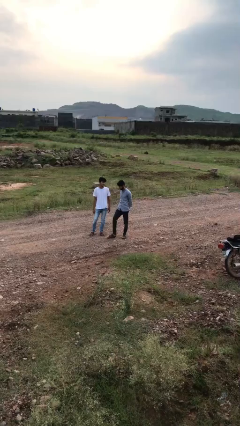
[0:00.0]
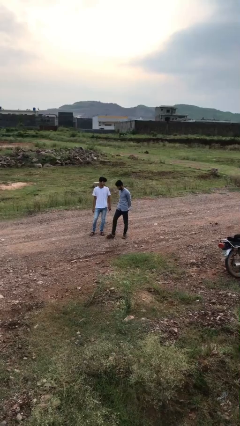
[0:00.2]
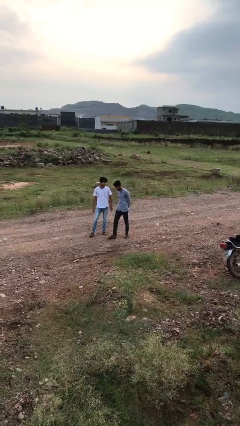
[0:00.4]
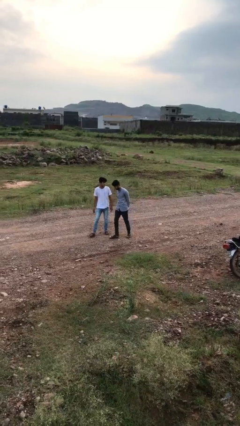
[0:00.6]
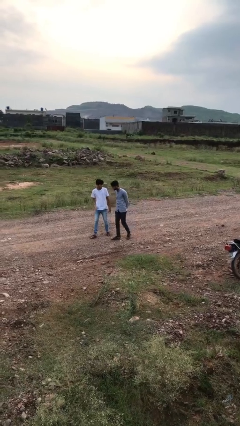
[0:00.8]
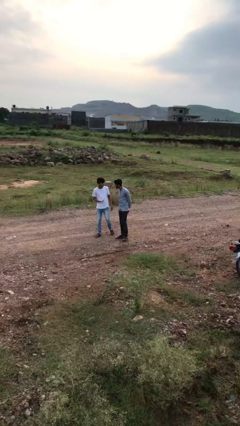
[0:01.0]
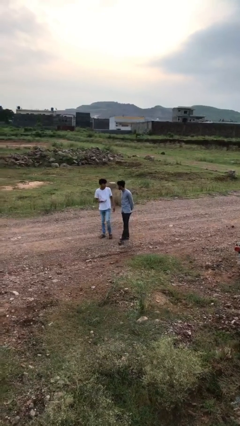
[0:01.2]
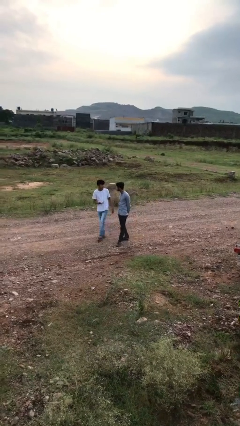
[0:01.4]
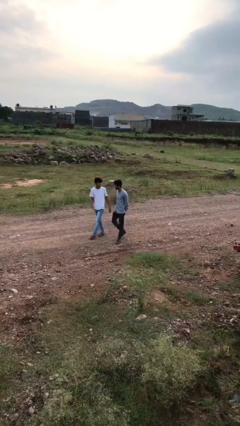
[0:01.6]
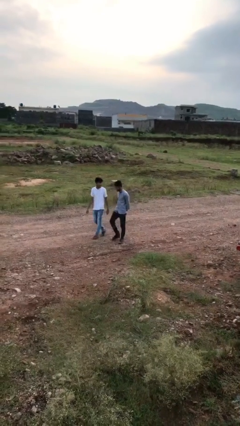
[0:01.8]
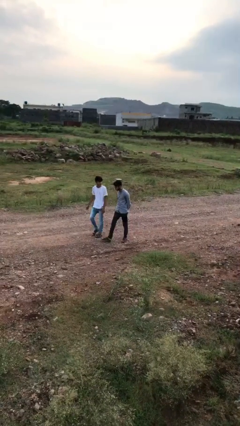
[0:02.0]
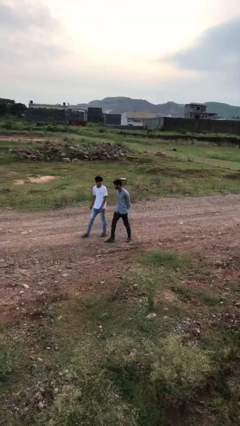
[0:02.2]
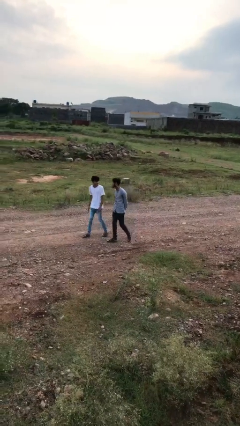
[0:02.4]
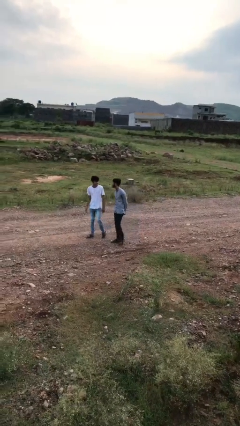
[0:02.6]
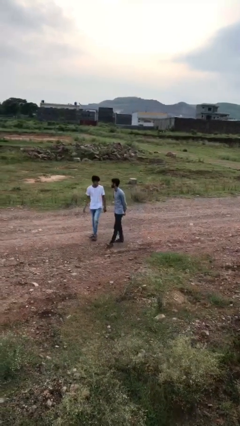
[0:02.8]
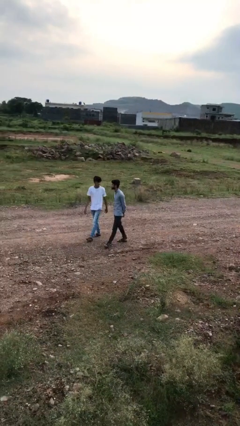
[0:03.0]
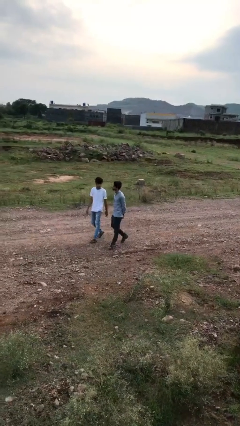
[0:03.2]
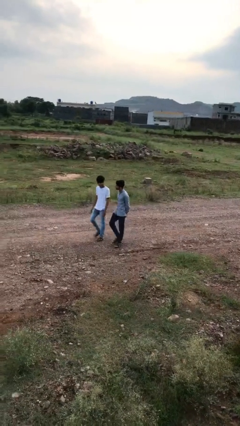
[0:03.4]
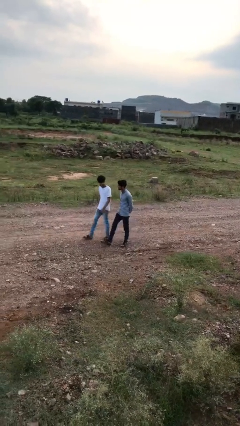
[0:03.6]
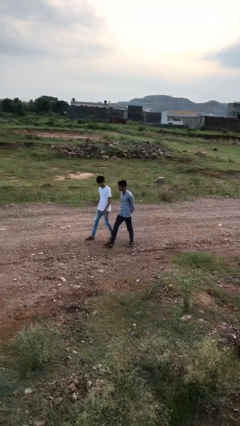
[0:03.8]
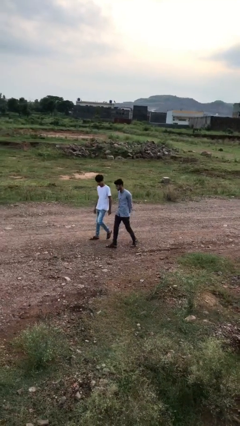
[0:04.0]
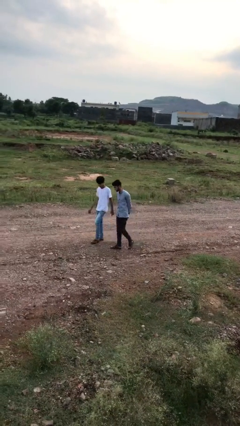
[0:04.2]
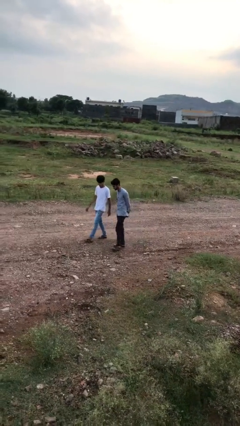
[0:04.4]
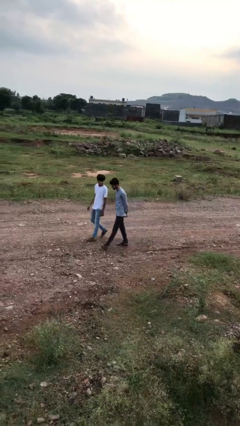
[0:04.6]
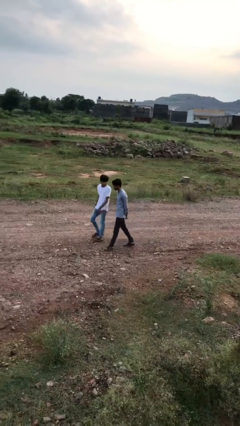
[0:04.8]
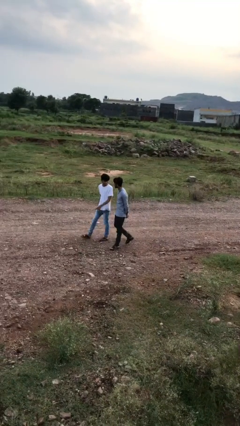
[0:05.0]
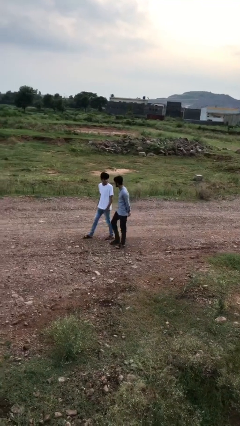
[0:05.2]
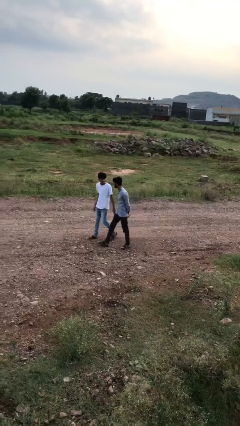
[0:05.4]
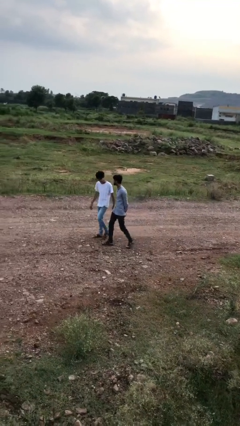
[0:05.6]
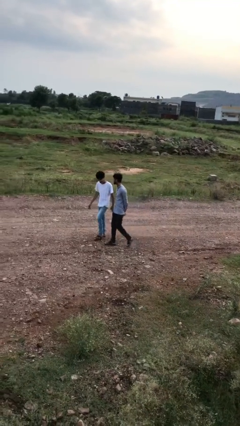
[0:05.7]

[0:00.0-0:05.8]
person talks to person

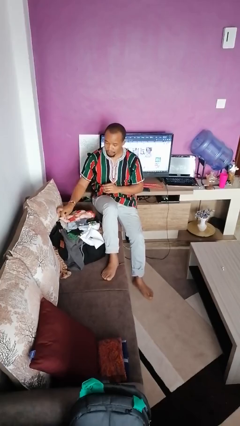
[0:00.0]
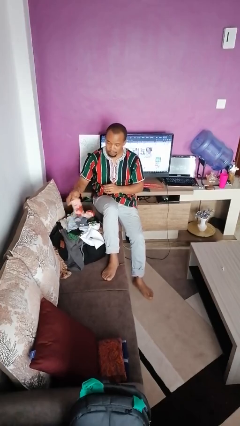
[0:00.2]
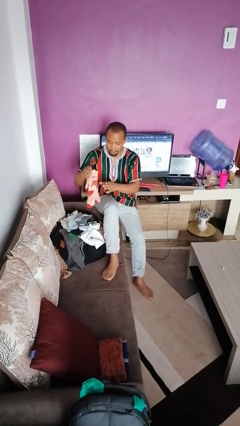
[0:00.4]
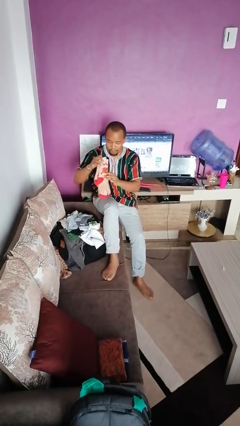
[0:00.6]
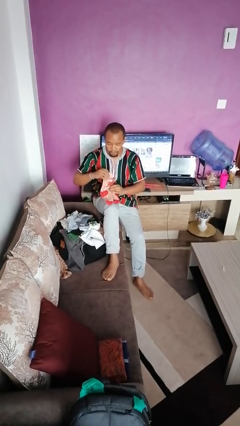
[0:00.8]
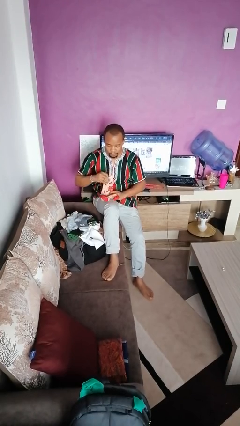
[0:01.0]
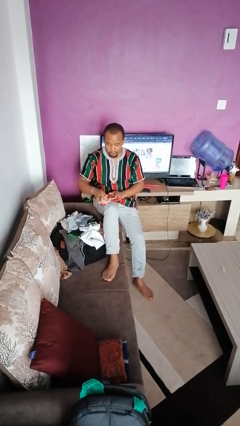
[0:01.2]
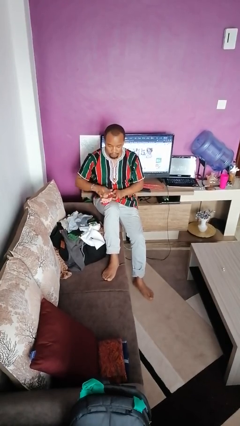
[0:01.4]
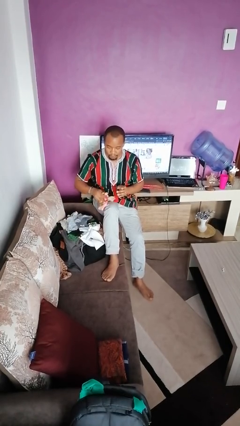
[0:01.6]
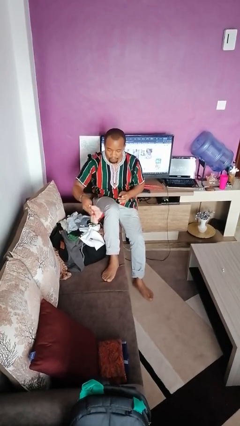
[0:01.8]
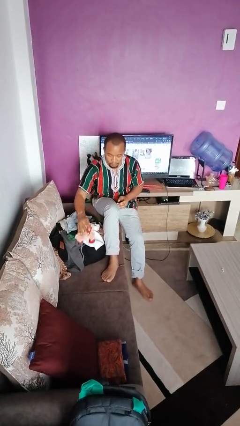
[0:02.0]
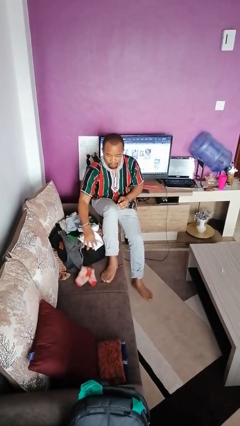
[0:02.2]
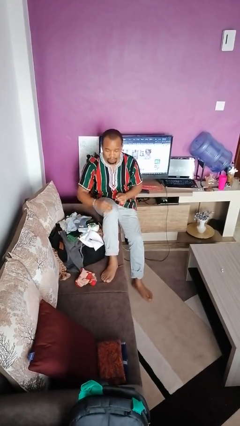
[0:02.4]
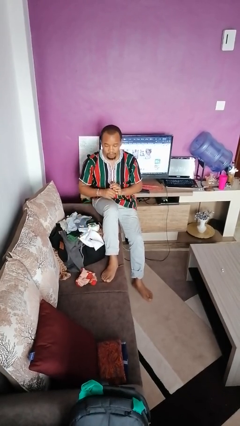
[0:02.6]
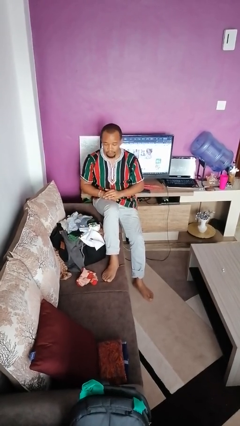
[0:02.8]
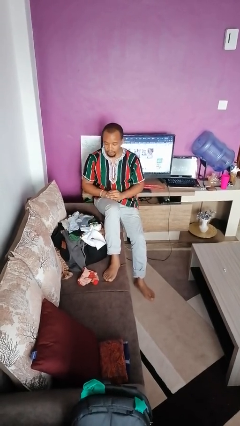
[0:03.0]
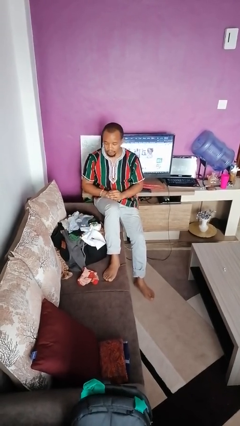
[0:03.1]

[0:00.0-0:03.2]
person folds socks

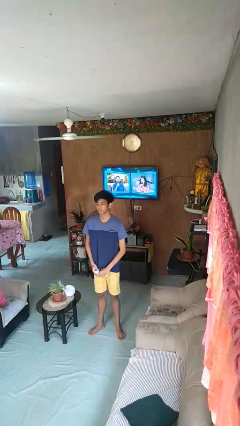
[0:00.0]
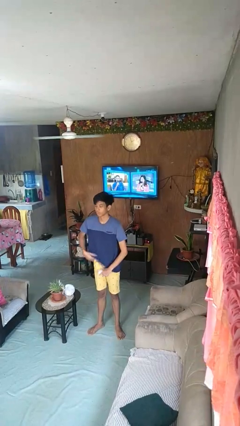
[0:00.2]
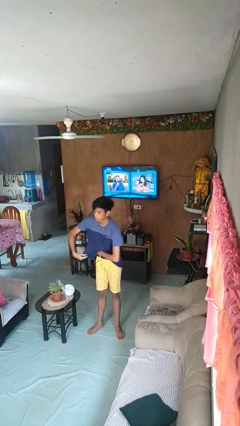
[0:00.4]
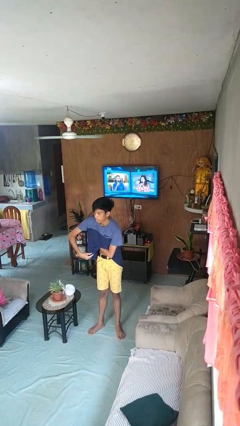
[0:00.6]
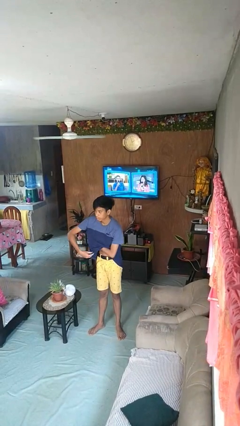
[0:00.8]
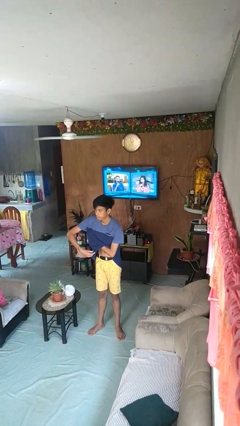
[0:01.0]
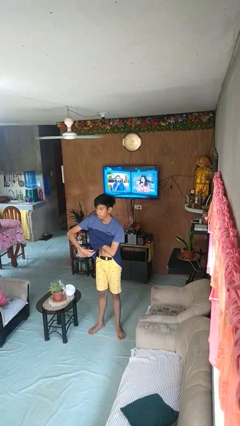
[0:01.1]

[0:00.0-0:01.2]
person applies deodorant

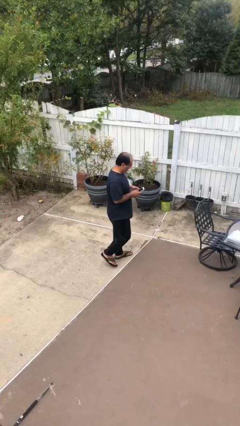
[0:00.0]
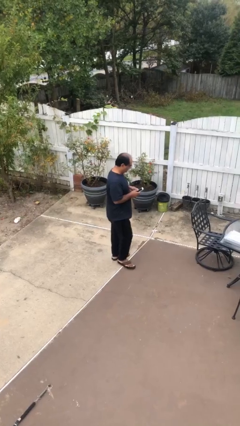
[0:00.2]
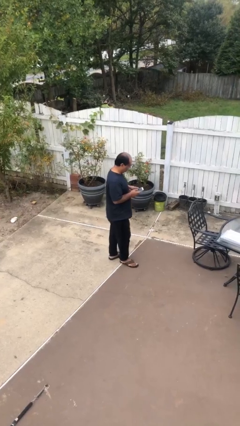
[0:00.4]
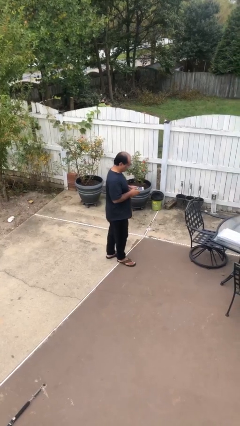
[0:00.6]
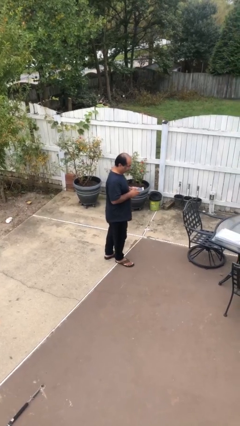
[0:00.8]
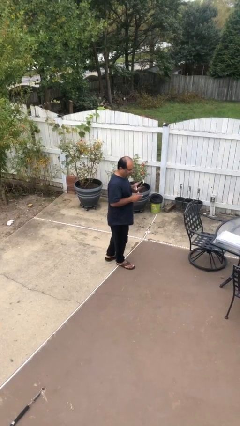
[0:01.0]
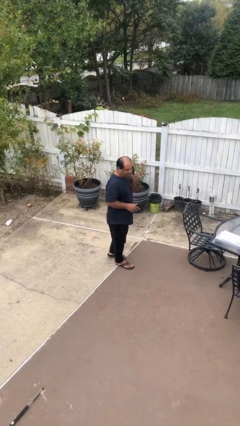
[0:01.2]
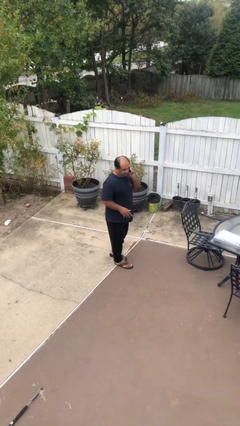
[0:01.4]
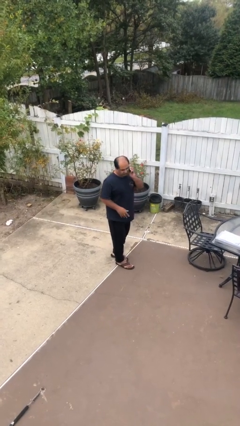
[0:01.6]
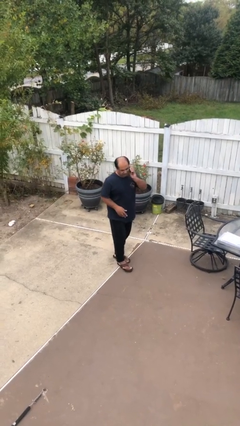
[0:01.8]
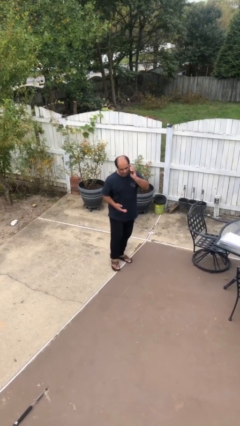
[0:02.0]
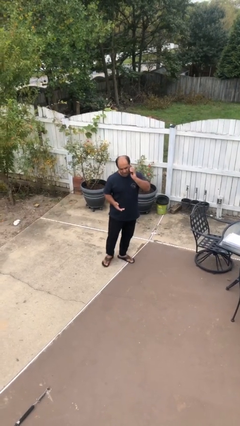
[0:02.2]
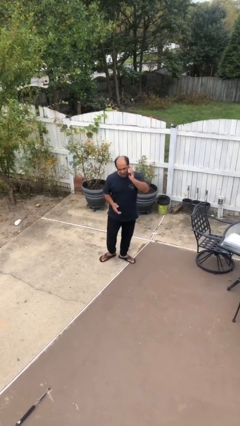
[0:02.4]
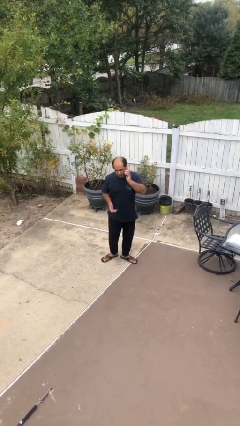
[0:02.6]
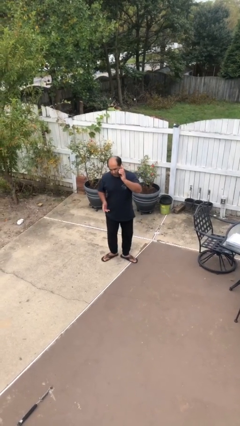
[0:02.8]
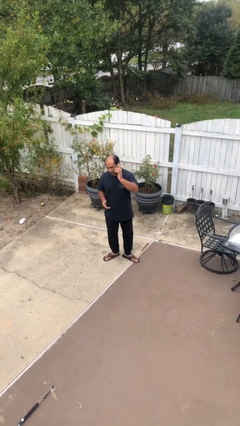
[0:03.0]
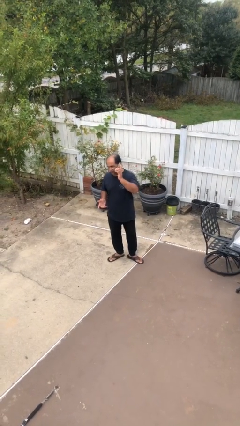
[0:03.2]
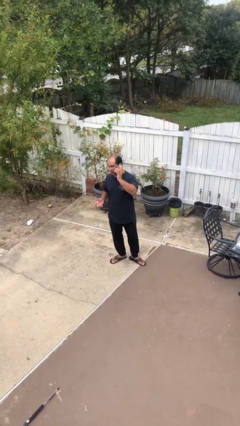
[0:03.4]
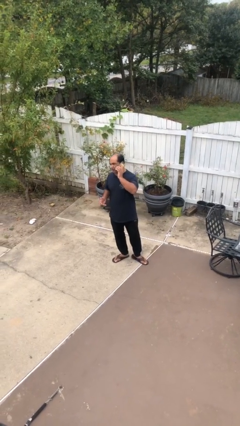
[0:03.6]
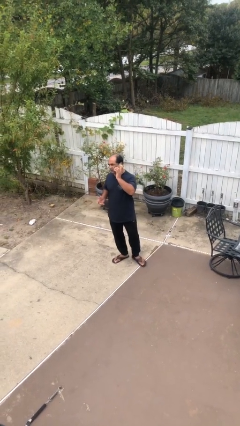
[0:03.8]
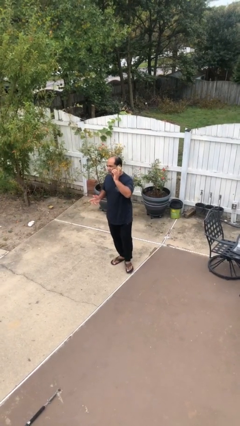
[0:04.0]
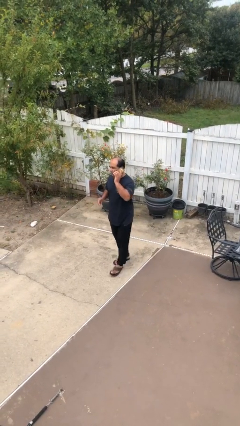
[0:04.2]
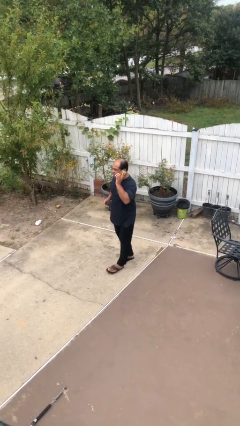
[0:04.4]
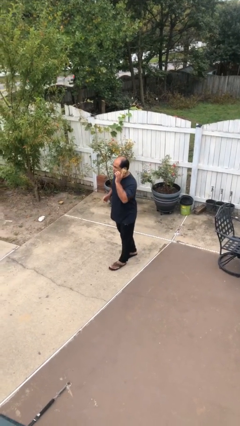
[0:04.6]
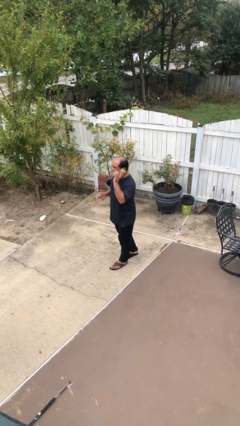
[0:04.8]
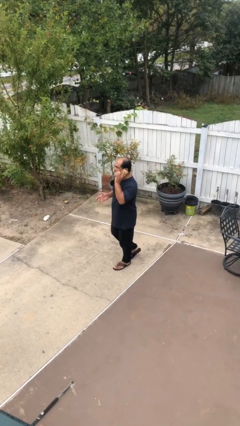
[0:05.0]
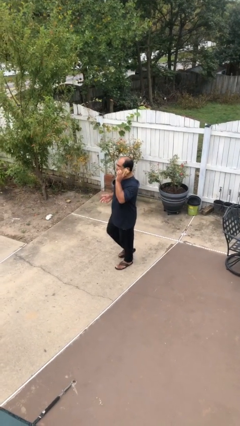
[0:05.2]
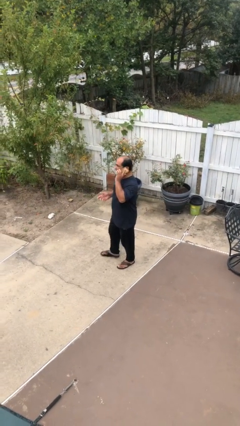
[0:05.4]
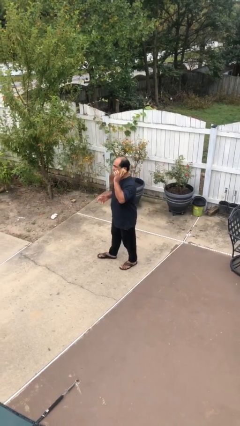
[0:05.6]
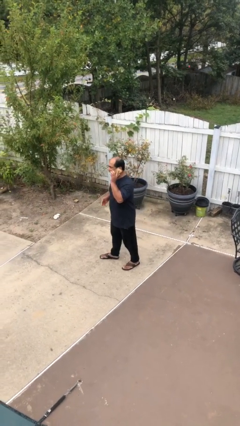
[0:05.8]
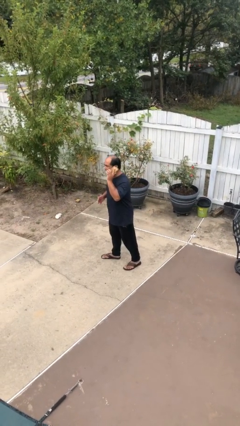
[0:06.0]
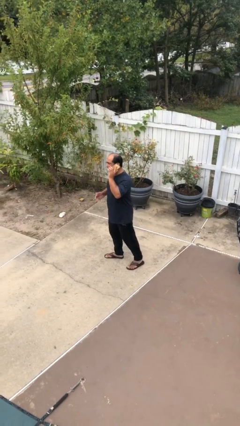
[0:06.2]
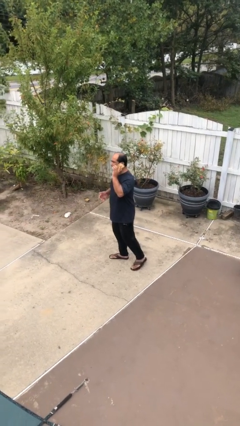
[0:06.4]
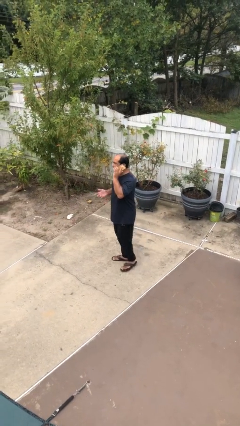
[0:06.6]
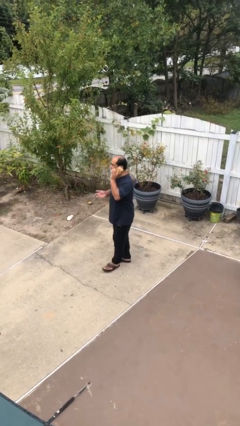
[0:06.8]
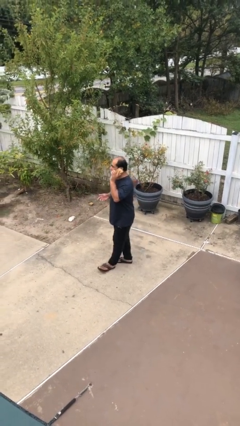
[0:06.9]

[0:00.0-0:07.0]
person talks on phone

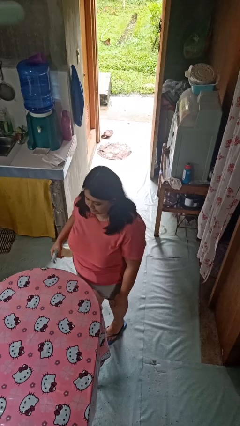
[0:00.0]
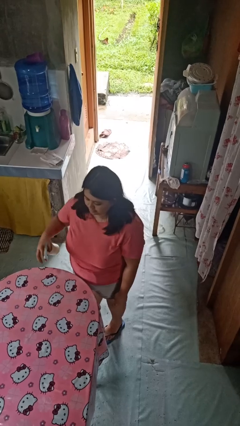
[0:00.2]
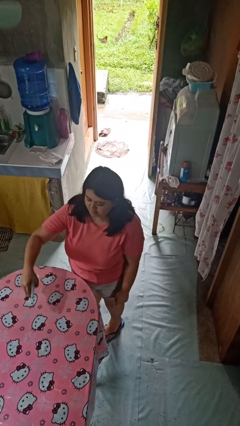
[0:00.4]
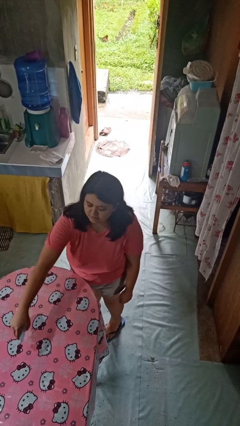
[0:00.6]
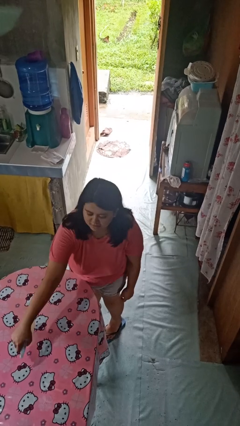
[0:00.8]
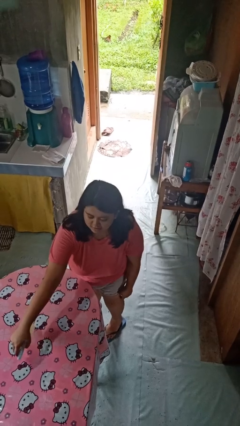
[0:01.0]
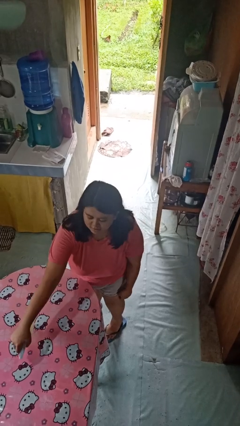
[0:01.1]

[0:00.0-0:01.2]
person sprays from bottle
